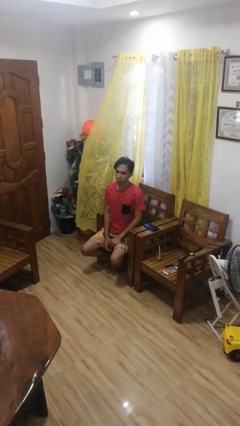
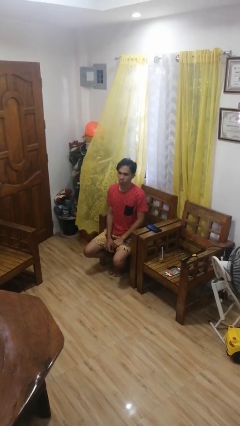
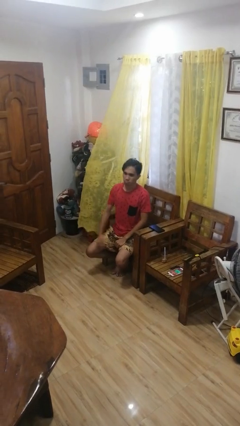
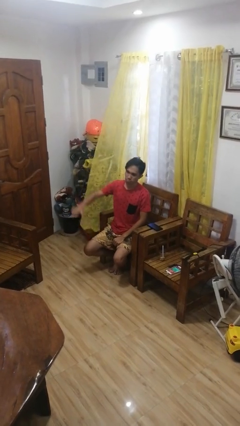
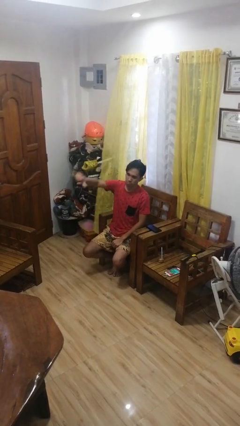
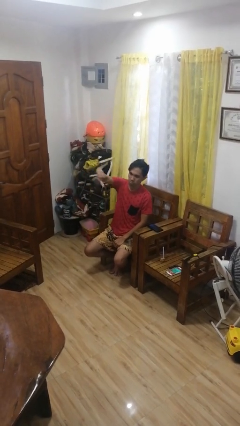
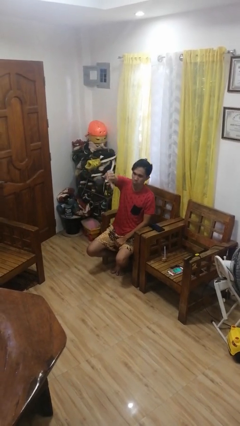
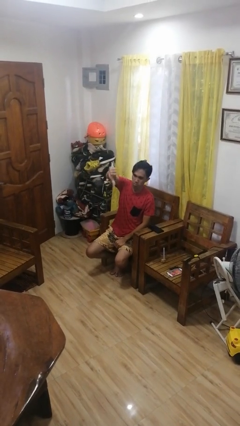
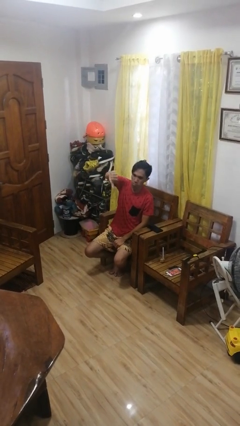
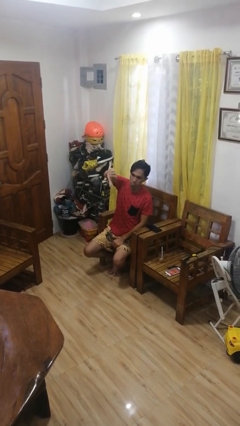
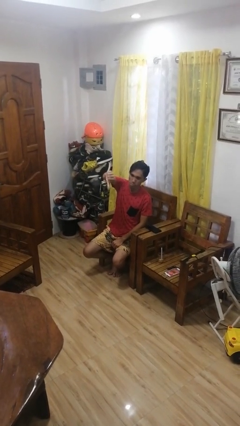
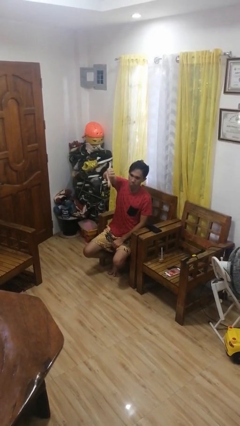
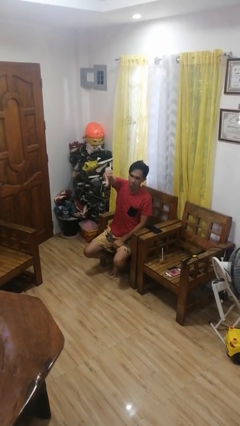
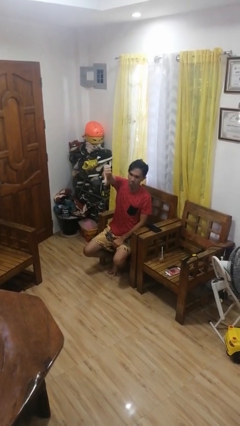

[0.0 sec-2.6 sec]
person gestures thumbs down

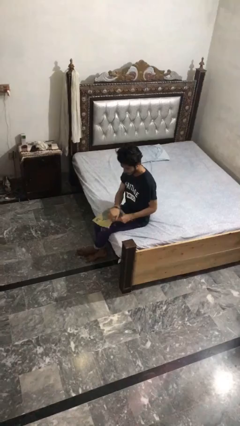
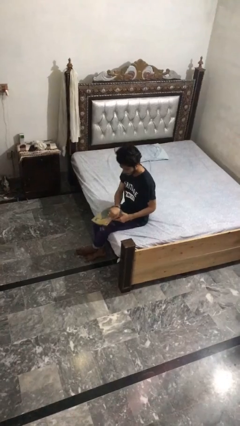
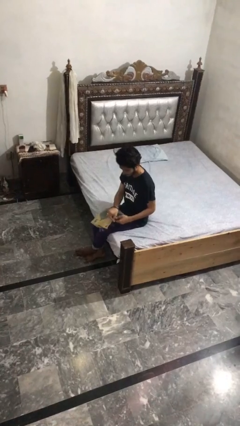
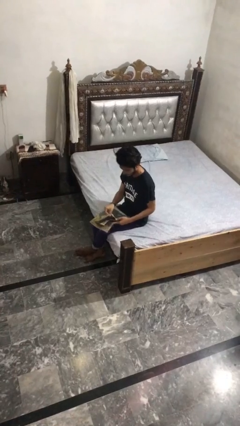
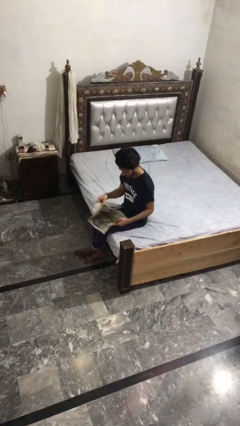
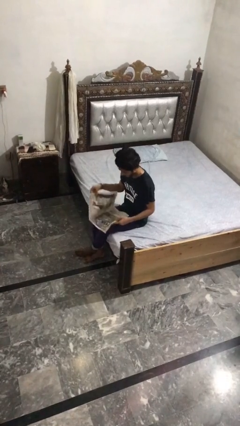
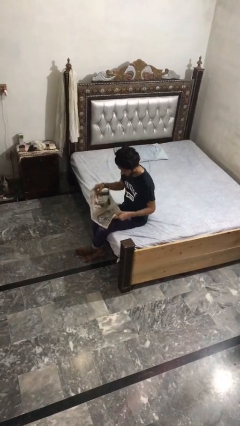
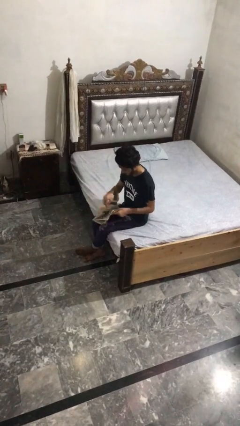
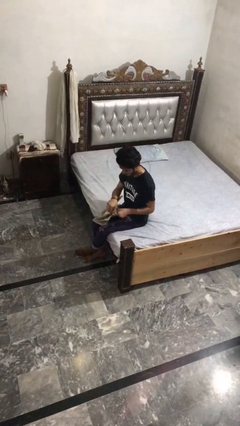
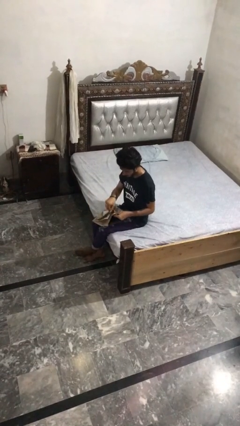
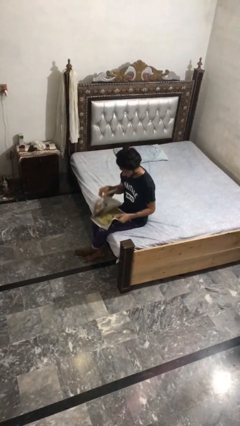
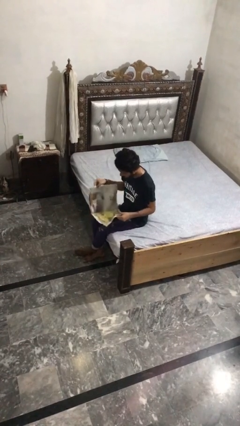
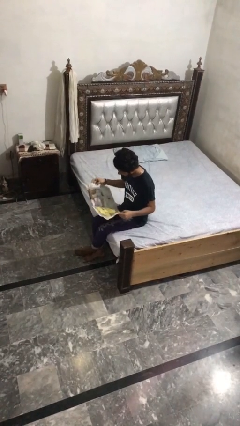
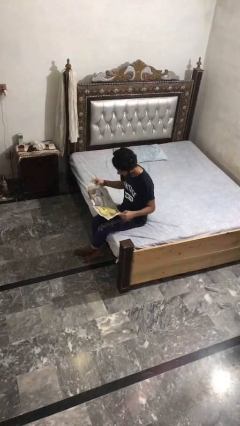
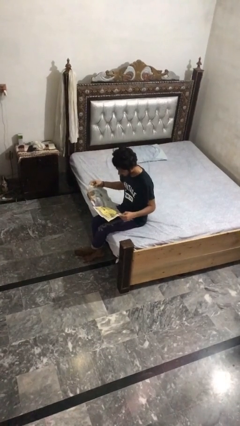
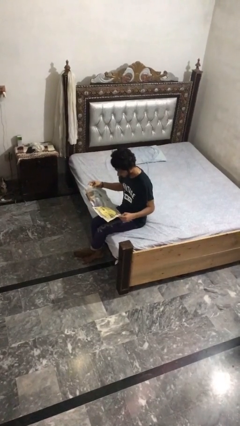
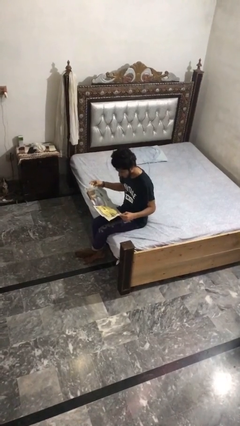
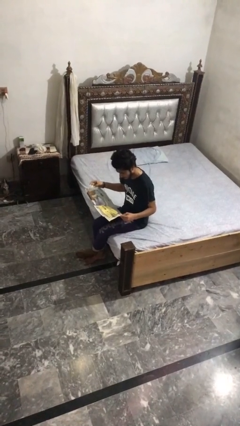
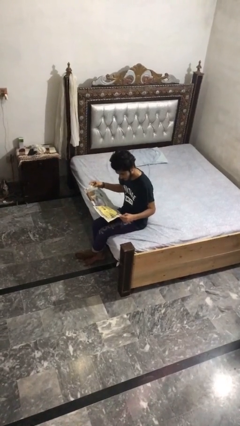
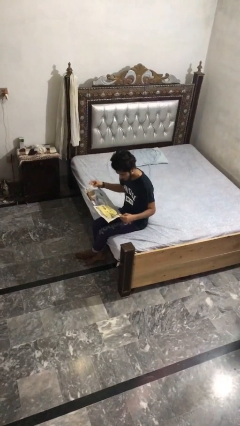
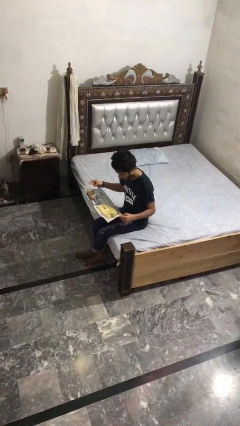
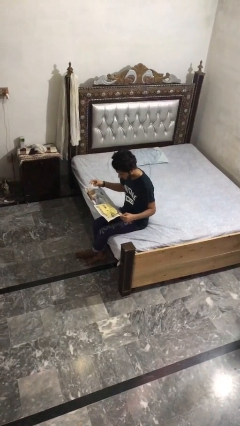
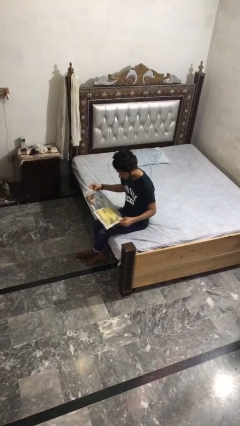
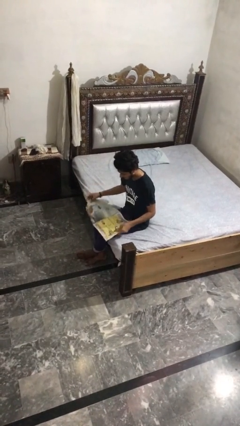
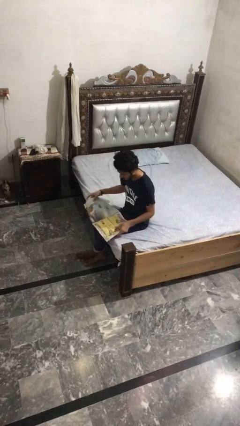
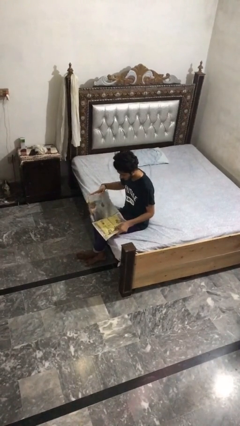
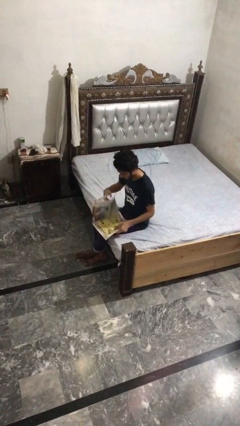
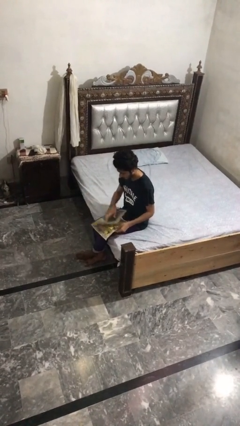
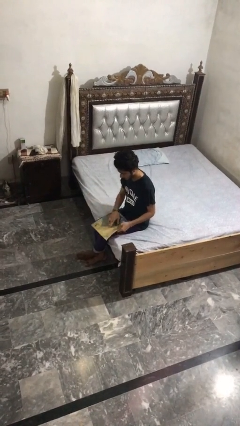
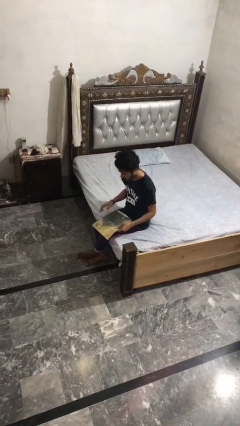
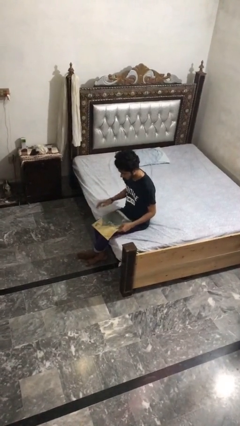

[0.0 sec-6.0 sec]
person reads magazine

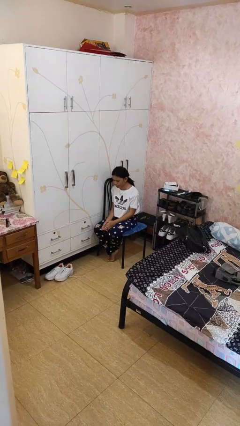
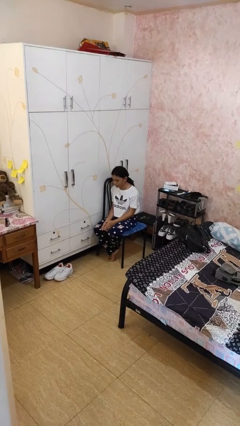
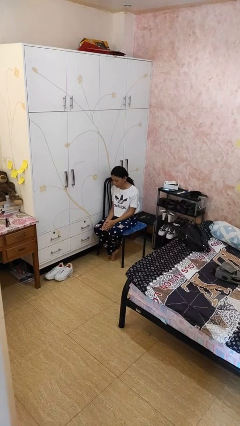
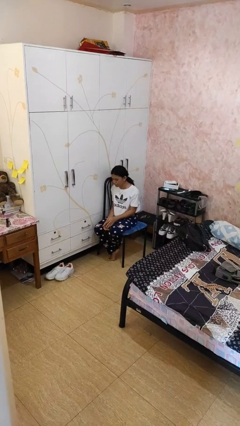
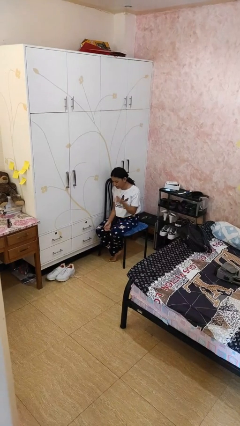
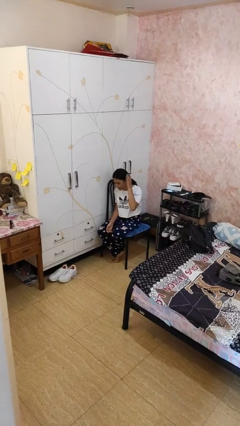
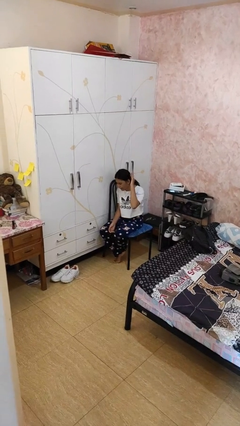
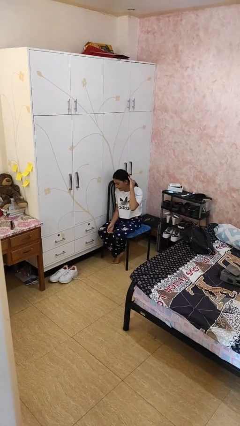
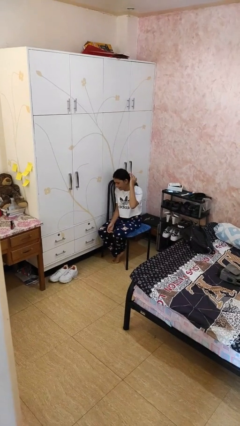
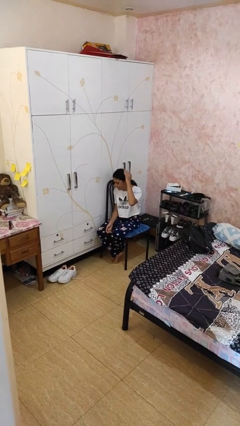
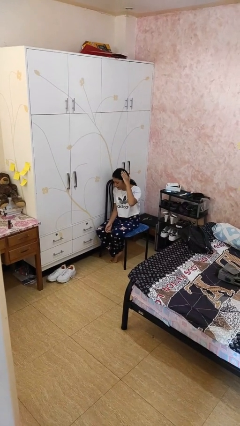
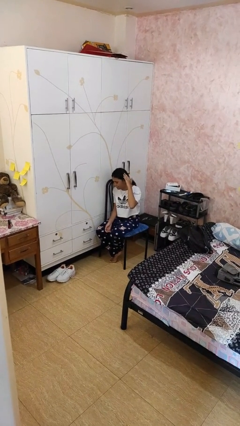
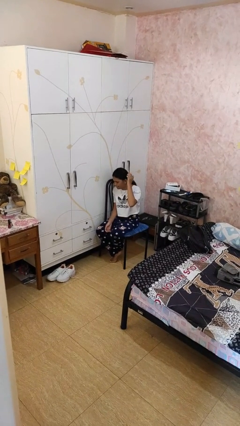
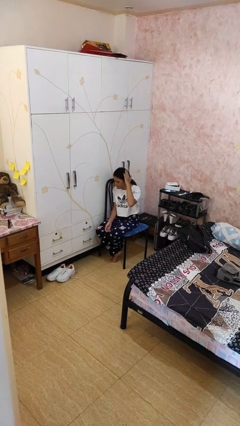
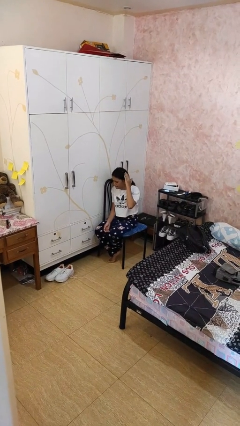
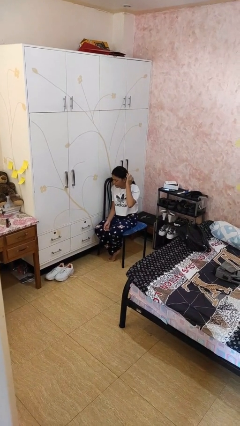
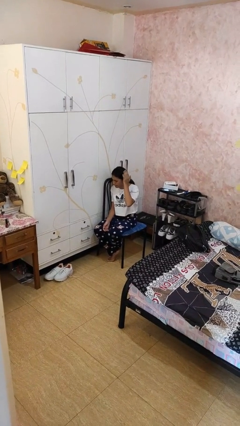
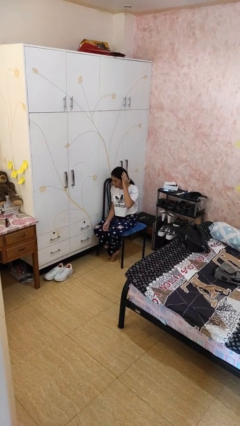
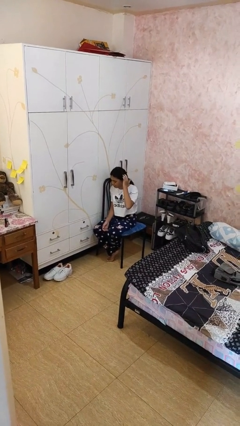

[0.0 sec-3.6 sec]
person pats head

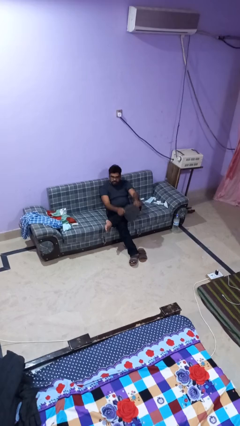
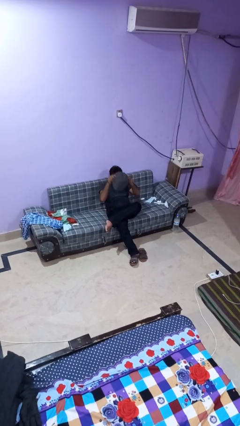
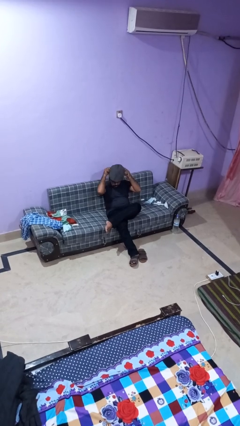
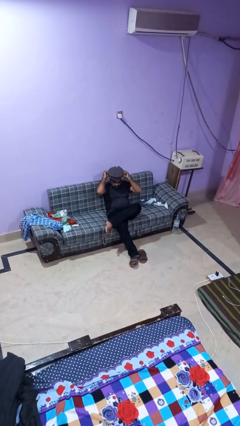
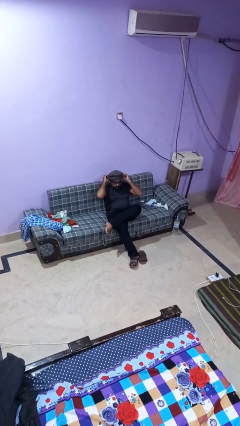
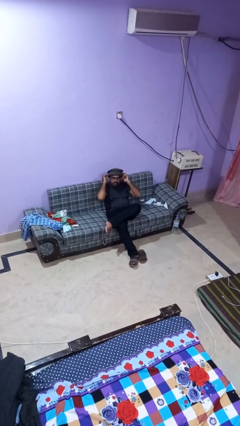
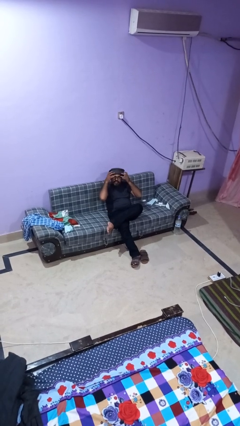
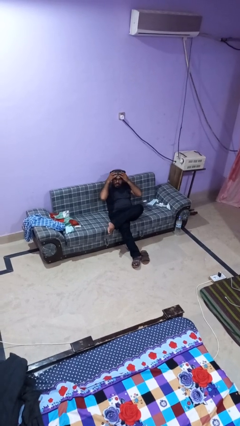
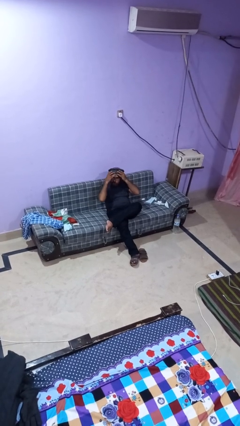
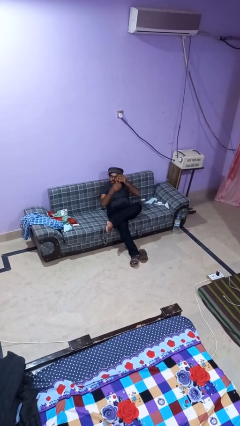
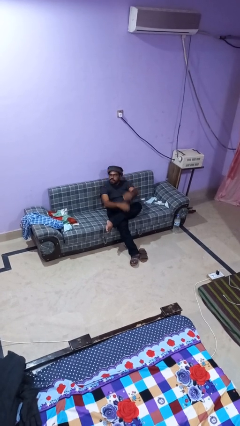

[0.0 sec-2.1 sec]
person puts on hat

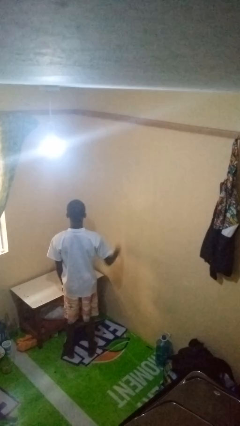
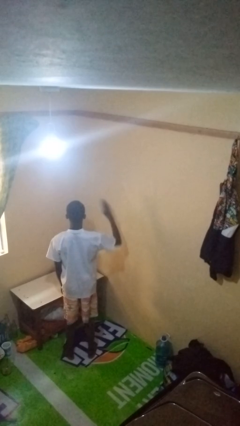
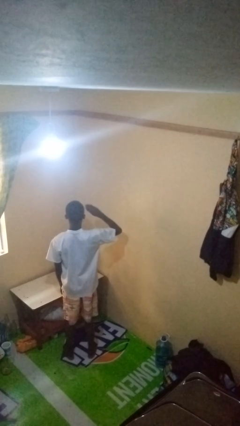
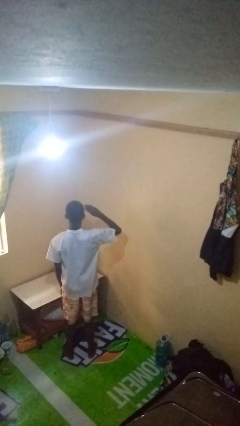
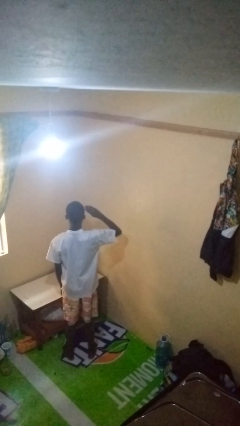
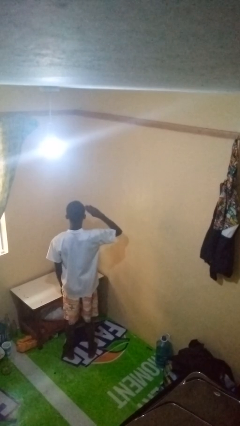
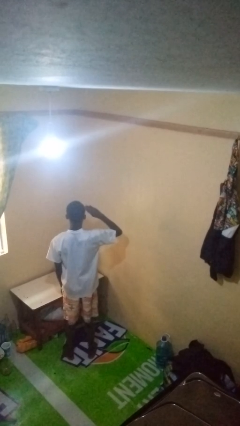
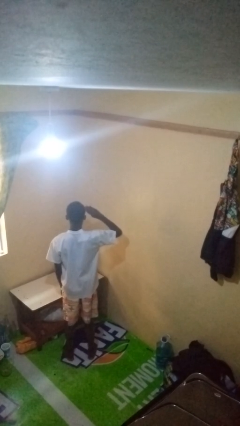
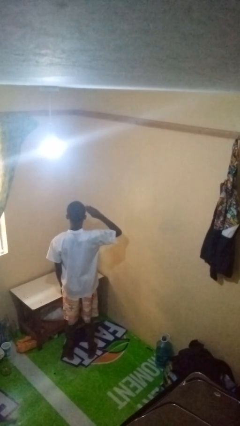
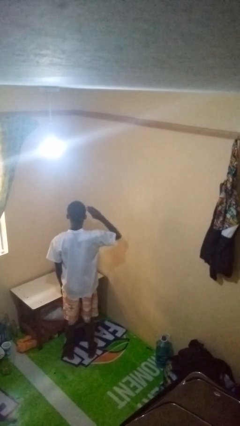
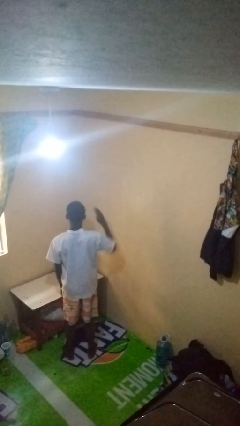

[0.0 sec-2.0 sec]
person salutes

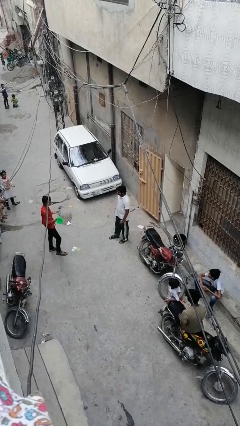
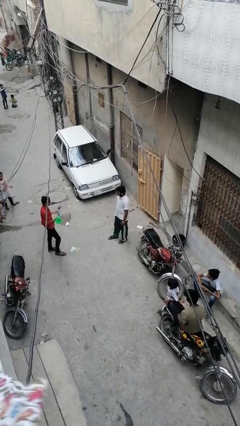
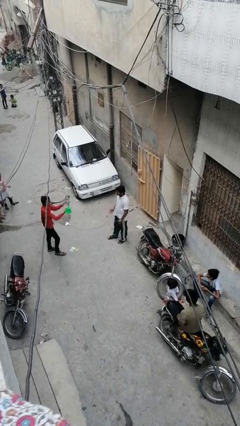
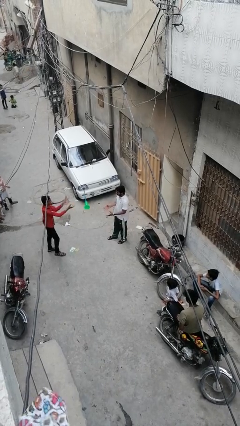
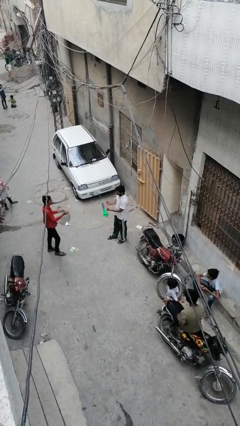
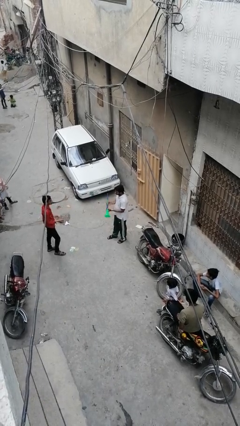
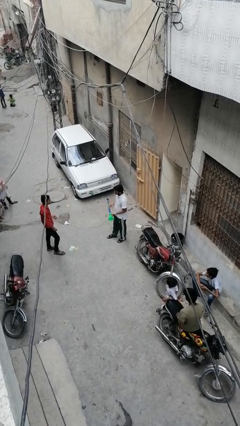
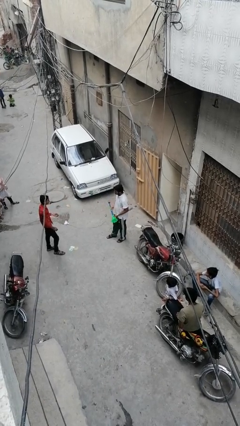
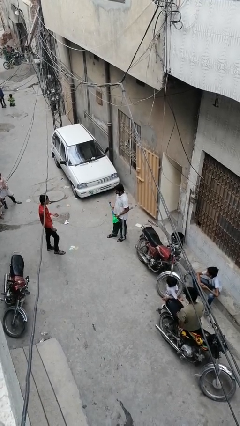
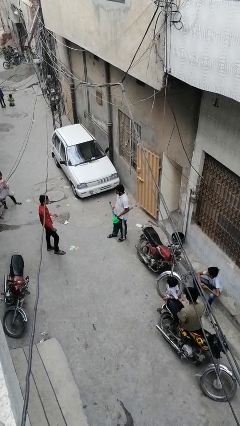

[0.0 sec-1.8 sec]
person catches object from person
